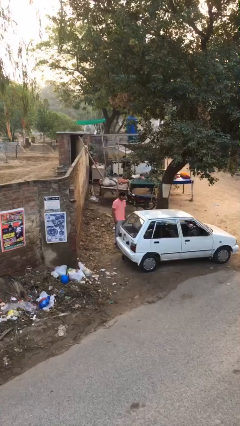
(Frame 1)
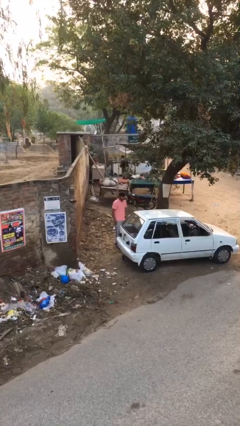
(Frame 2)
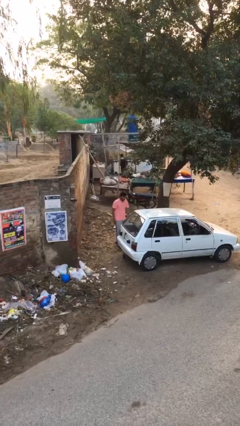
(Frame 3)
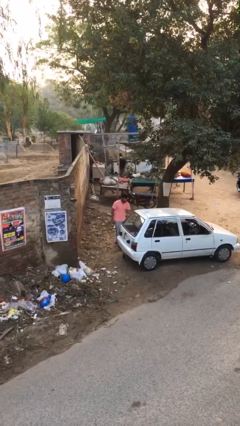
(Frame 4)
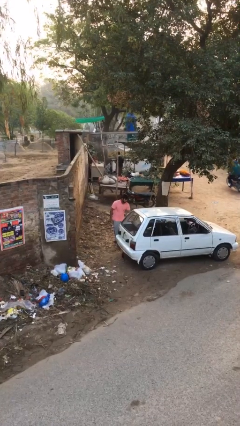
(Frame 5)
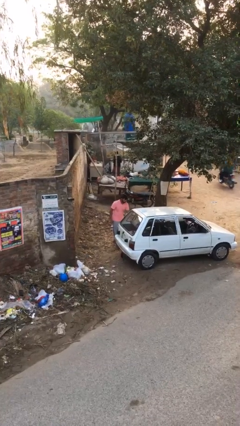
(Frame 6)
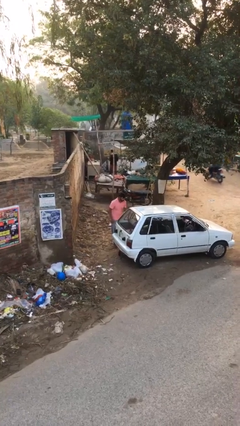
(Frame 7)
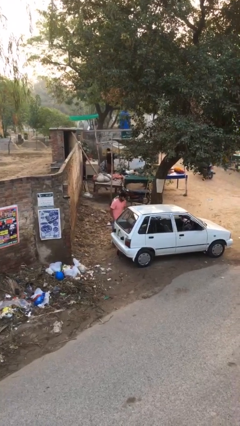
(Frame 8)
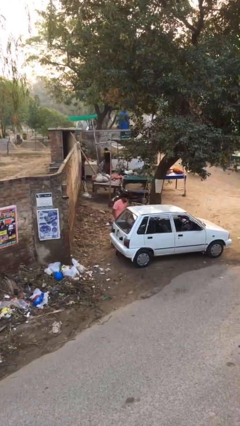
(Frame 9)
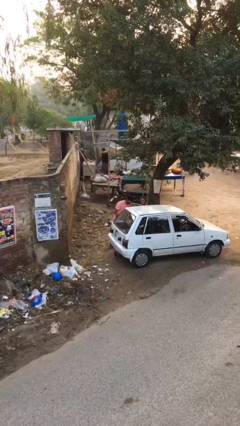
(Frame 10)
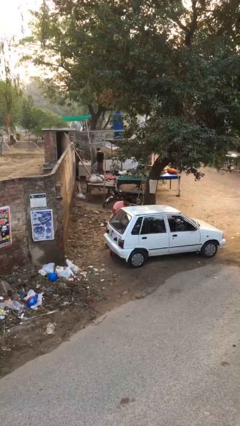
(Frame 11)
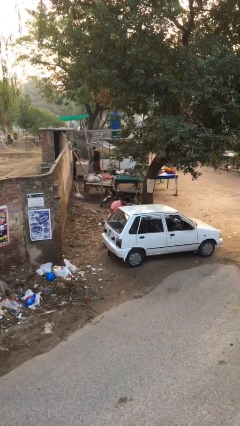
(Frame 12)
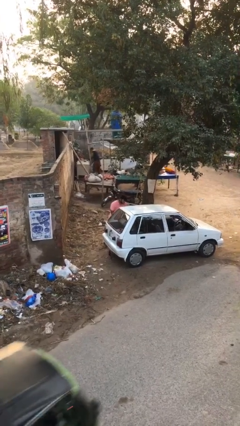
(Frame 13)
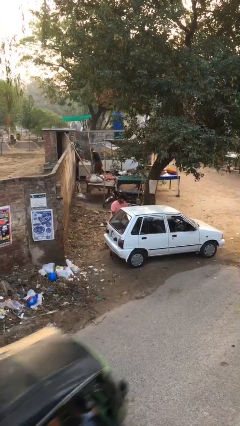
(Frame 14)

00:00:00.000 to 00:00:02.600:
person unloads car

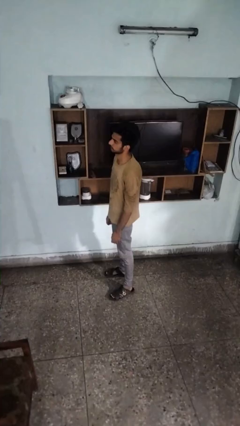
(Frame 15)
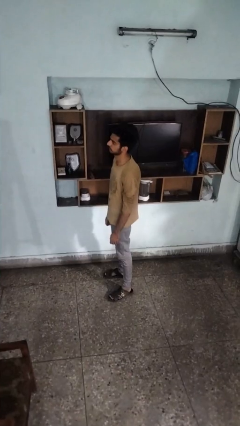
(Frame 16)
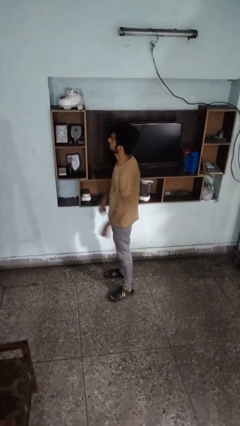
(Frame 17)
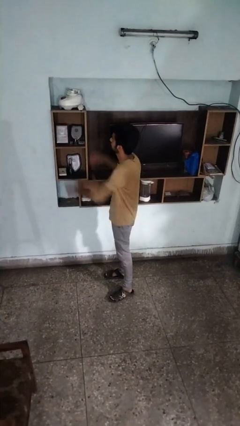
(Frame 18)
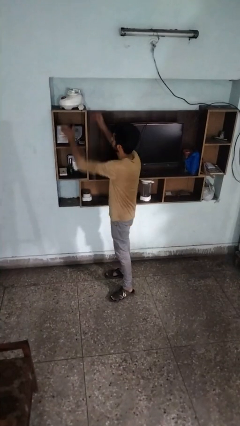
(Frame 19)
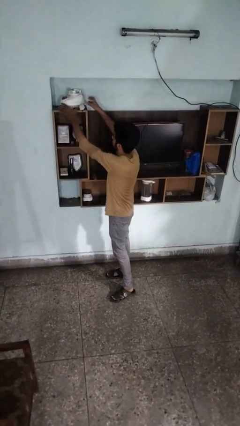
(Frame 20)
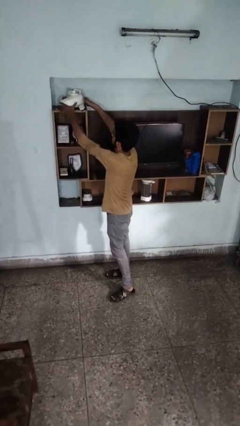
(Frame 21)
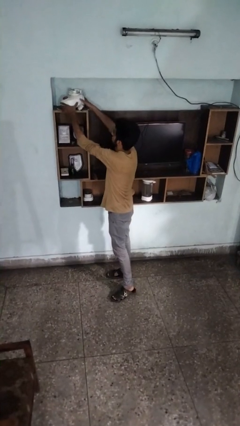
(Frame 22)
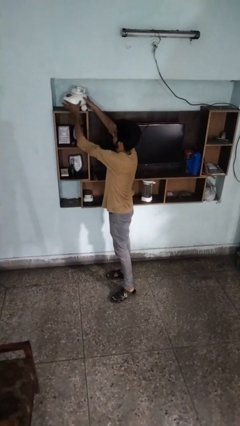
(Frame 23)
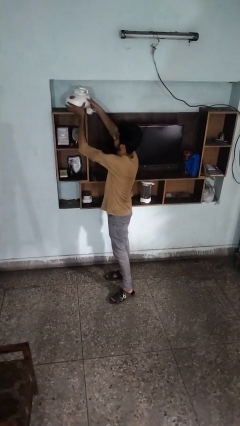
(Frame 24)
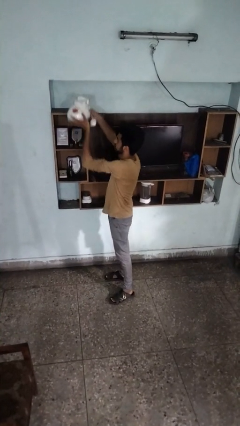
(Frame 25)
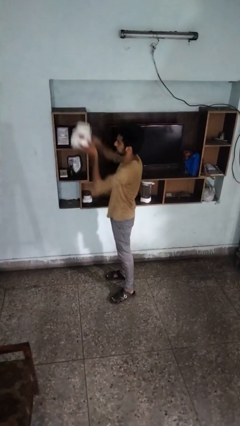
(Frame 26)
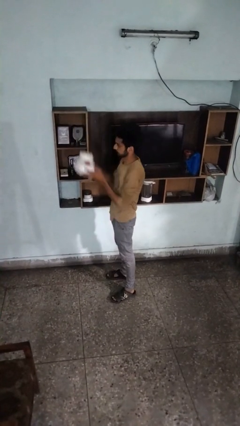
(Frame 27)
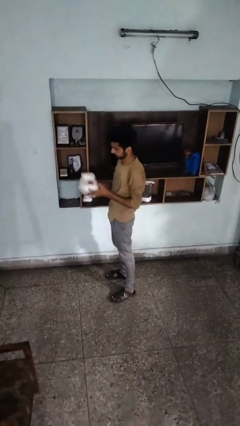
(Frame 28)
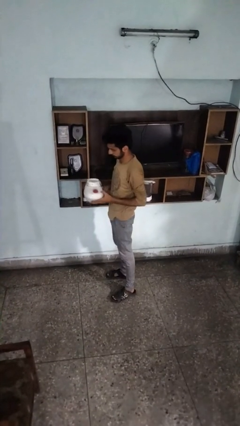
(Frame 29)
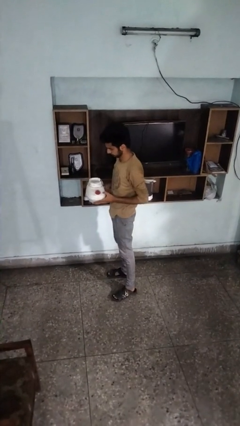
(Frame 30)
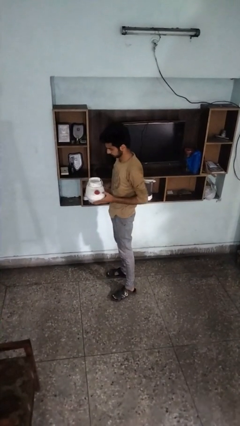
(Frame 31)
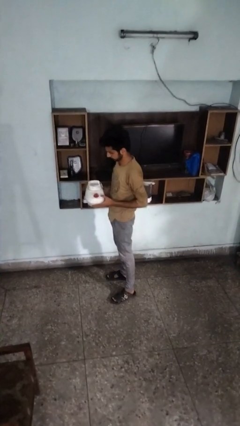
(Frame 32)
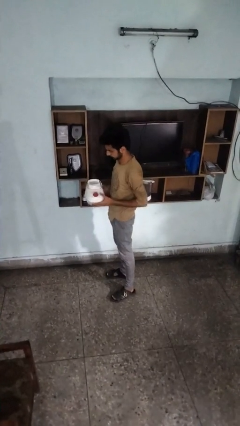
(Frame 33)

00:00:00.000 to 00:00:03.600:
person picks up object from shelf

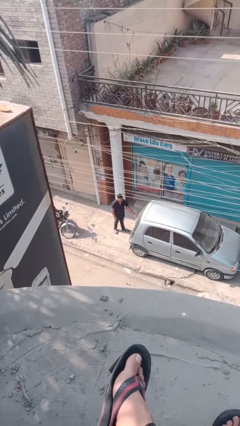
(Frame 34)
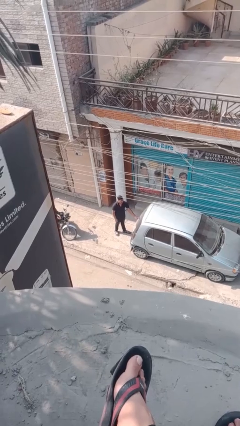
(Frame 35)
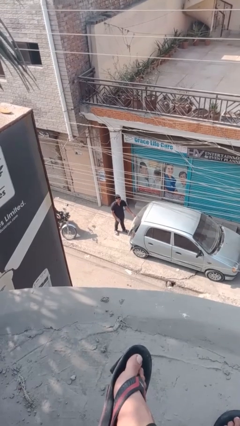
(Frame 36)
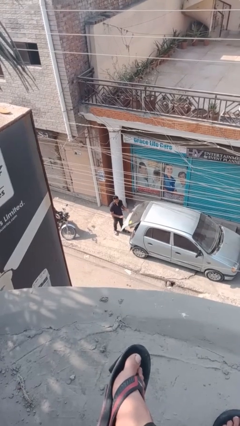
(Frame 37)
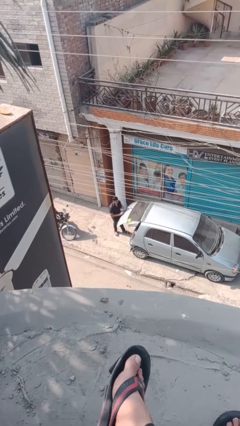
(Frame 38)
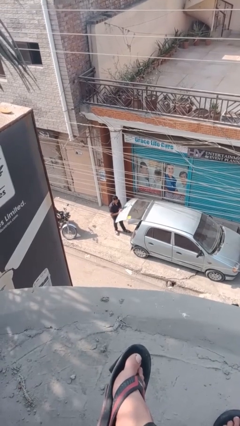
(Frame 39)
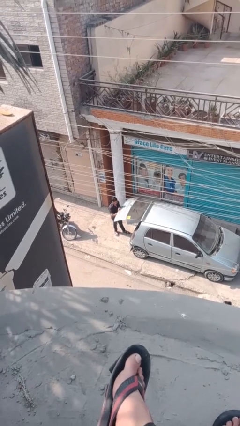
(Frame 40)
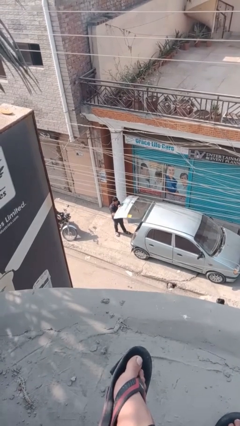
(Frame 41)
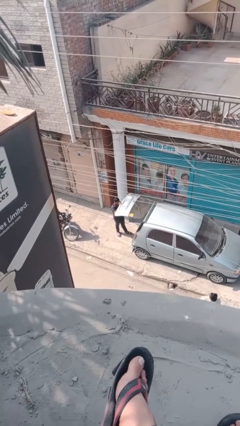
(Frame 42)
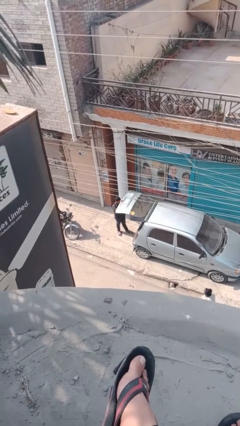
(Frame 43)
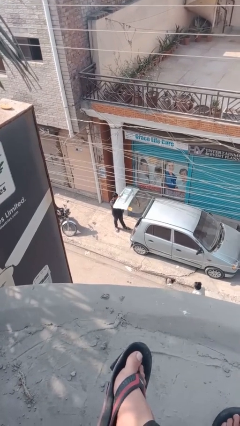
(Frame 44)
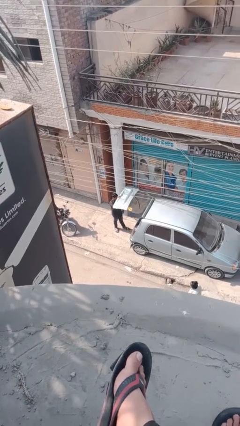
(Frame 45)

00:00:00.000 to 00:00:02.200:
person opens car trunk

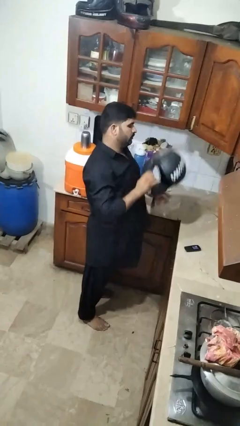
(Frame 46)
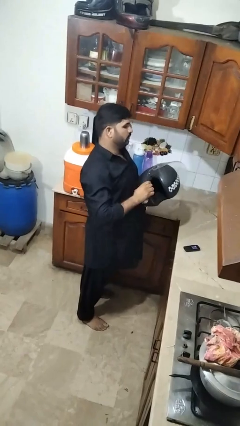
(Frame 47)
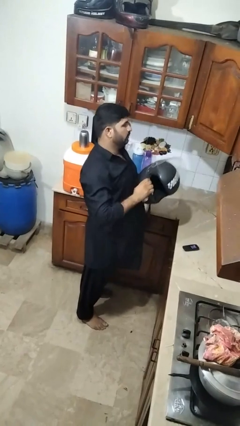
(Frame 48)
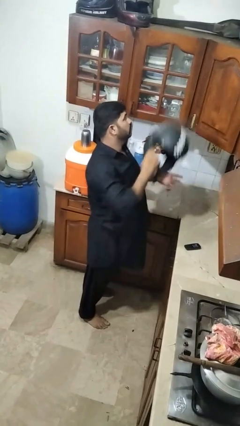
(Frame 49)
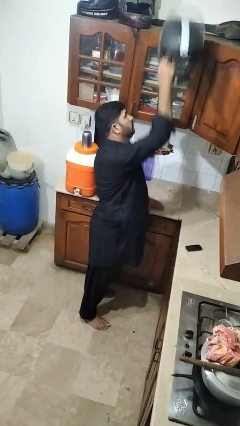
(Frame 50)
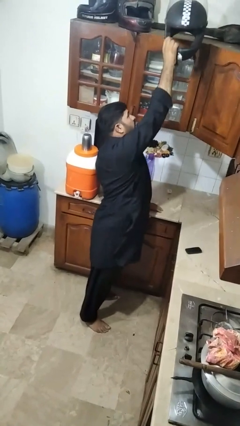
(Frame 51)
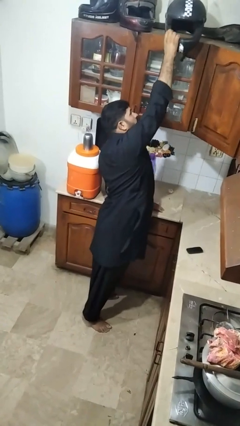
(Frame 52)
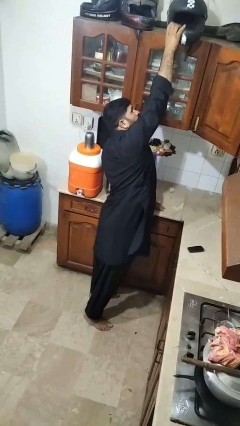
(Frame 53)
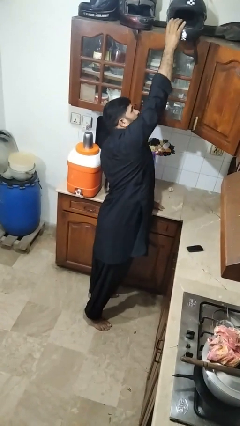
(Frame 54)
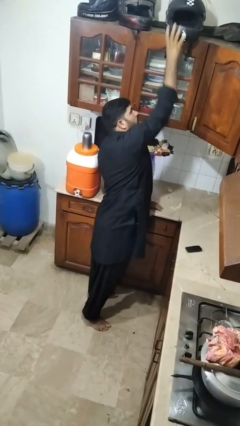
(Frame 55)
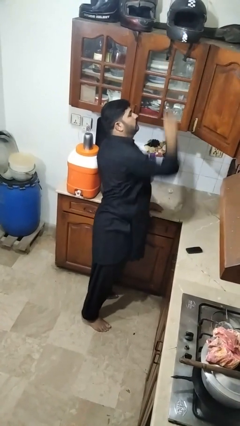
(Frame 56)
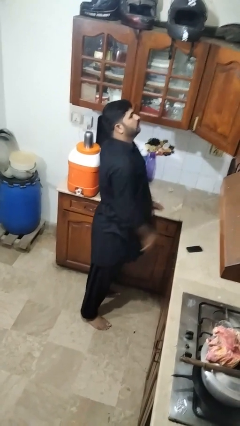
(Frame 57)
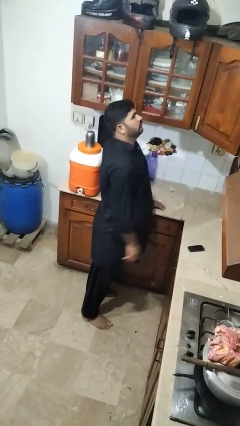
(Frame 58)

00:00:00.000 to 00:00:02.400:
person puts down object on shelf

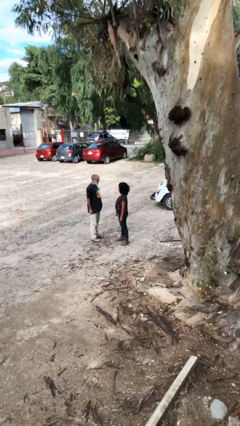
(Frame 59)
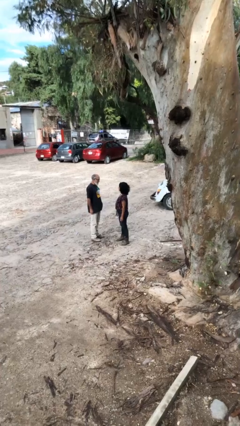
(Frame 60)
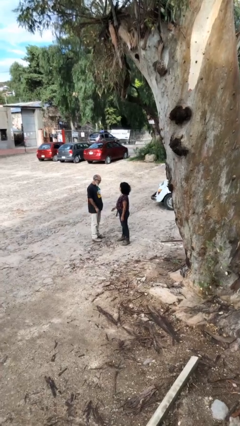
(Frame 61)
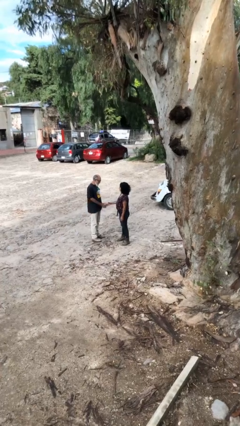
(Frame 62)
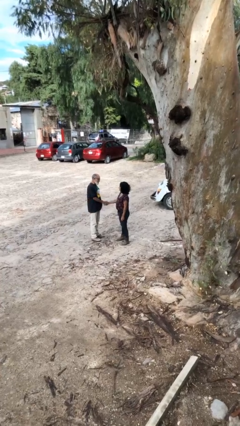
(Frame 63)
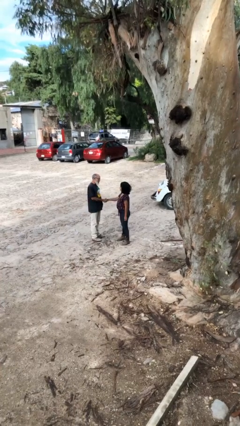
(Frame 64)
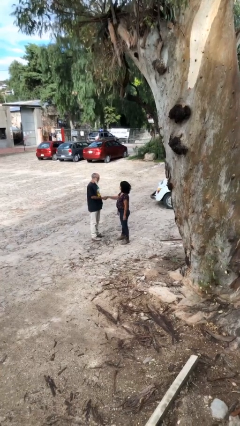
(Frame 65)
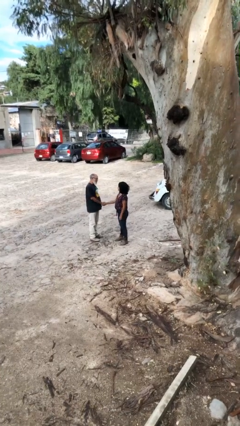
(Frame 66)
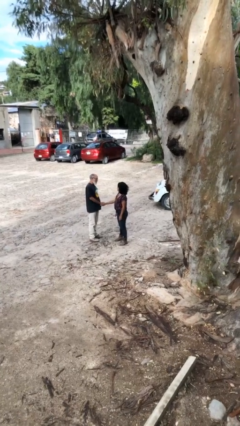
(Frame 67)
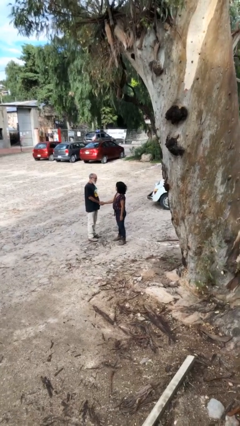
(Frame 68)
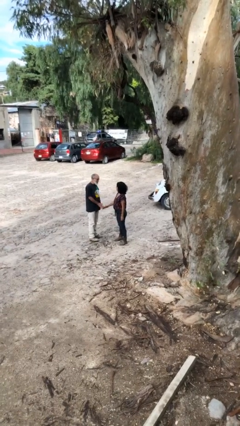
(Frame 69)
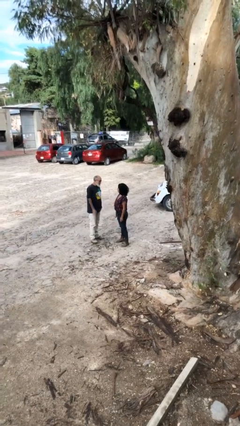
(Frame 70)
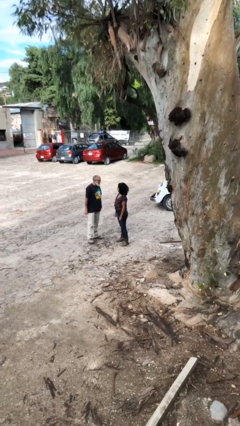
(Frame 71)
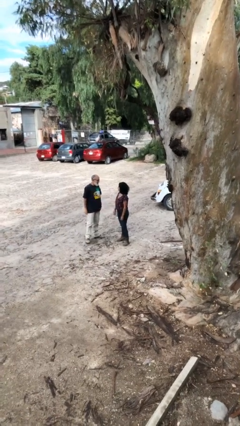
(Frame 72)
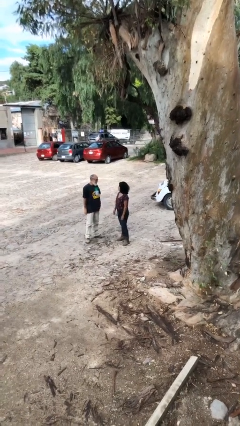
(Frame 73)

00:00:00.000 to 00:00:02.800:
person shakes hand

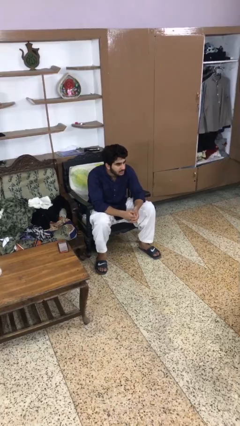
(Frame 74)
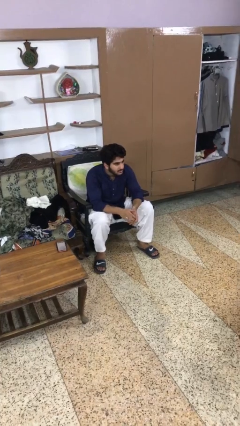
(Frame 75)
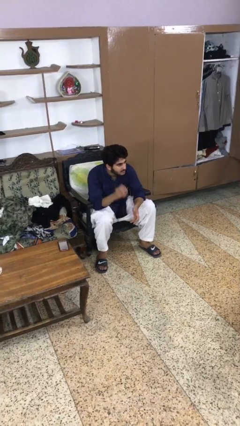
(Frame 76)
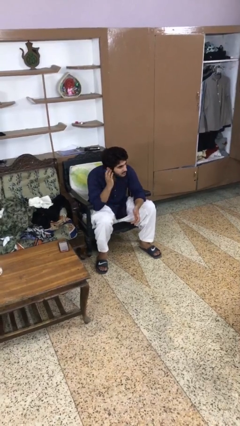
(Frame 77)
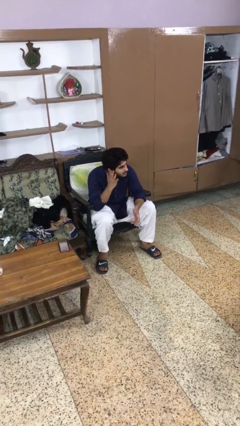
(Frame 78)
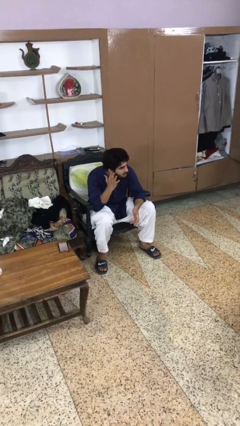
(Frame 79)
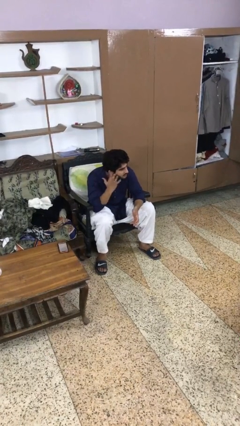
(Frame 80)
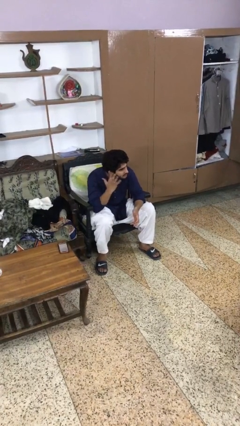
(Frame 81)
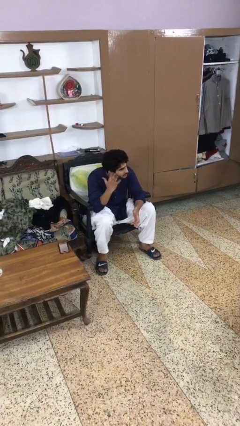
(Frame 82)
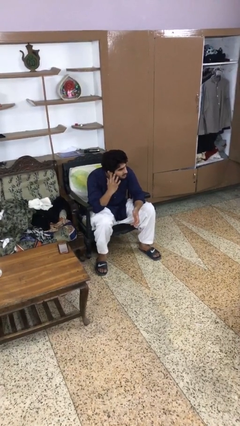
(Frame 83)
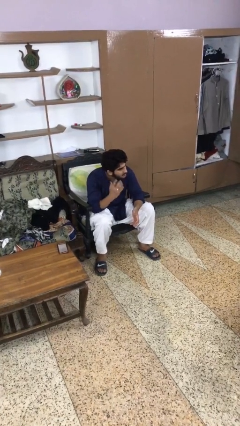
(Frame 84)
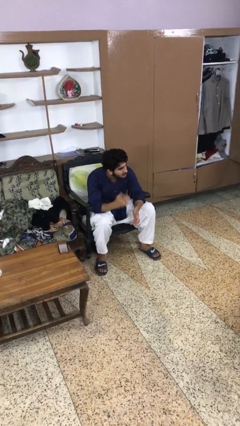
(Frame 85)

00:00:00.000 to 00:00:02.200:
person puts fingers in ear

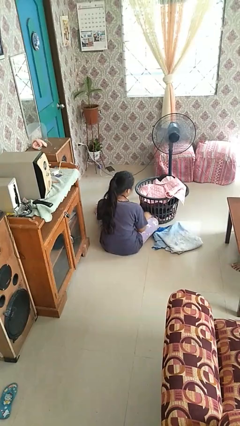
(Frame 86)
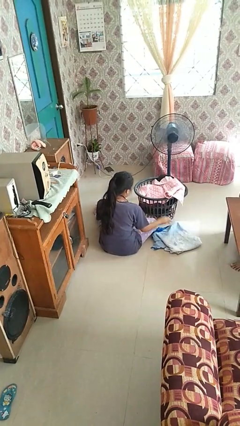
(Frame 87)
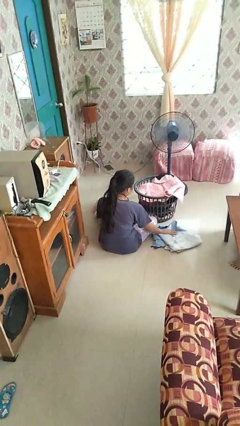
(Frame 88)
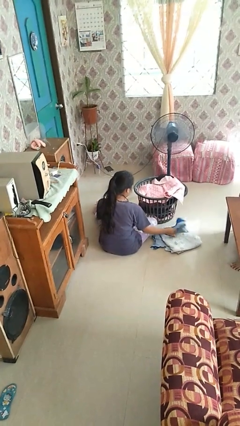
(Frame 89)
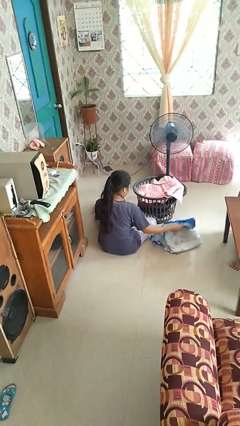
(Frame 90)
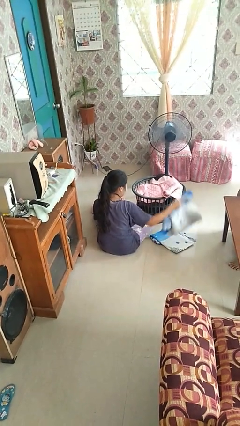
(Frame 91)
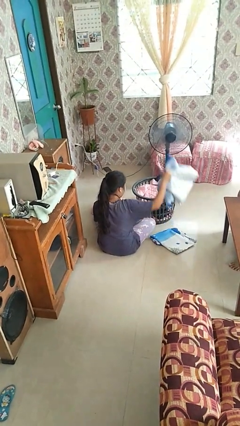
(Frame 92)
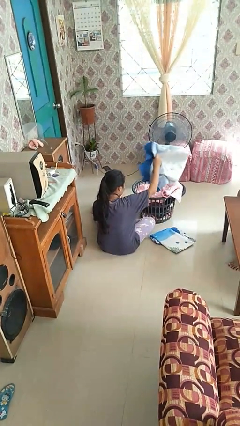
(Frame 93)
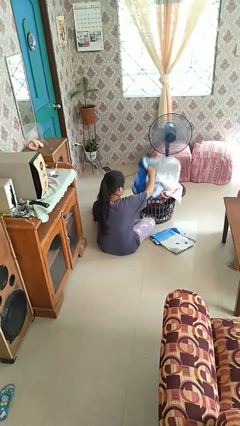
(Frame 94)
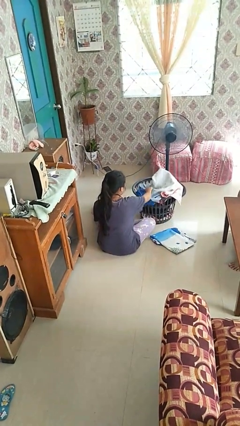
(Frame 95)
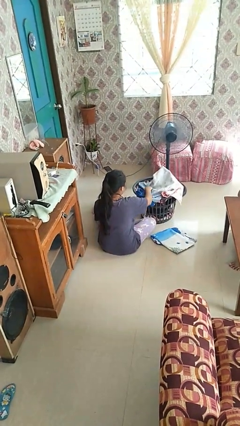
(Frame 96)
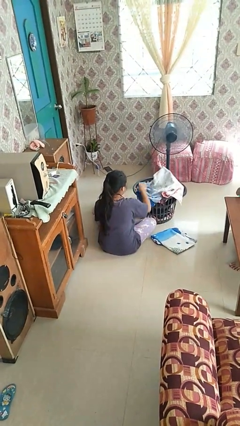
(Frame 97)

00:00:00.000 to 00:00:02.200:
person puts object into basket
